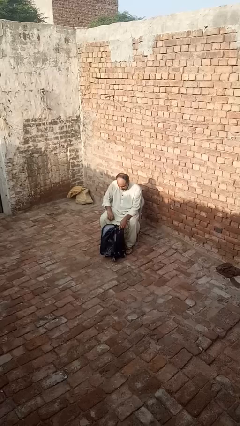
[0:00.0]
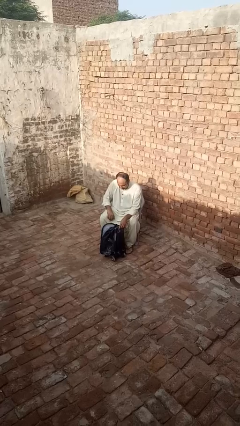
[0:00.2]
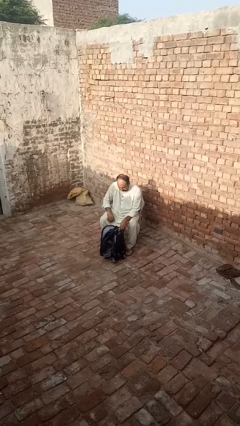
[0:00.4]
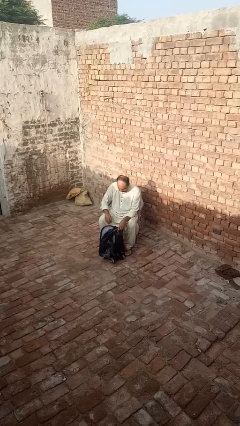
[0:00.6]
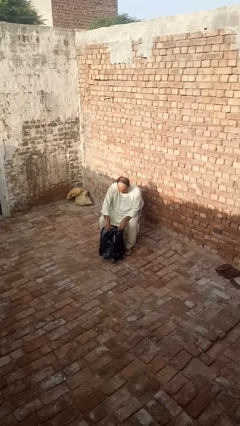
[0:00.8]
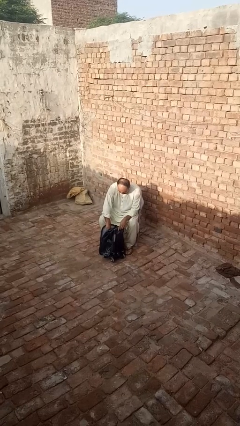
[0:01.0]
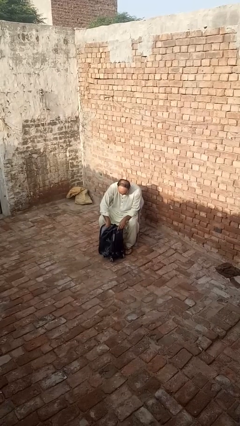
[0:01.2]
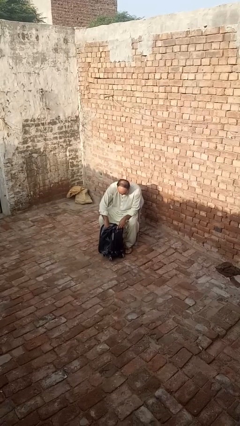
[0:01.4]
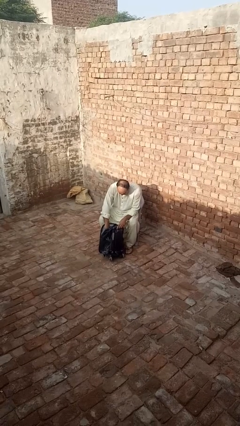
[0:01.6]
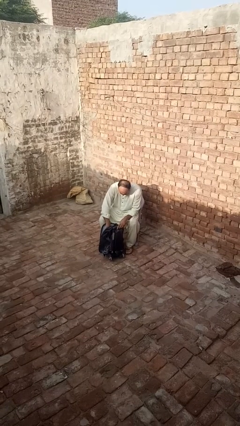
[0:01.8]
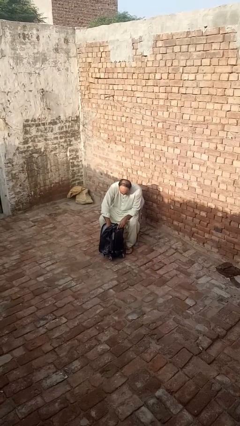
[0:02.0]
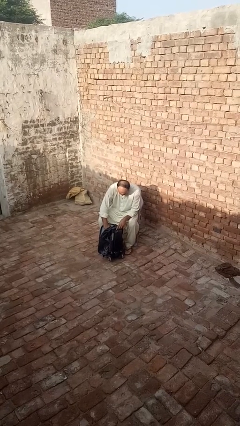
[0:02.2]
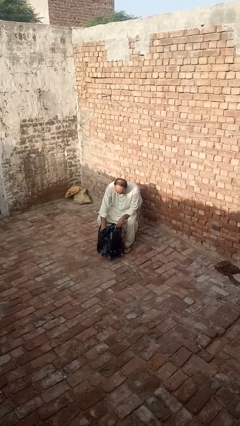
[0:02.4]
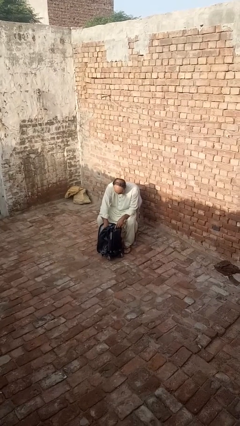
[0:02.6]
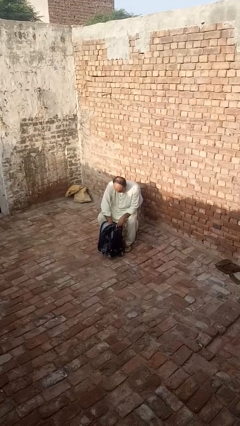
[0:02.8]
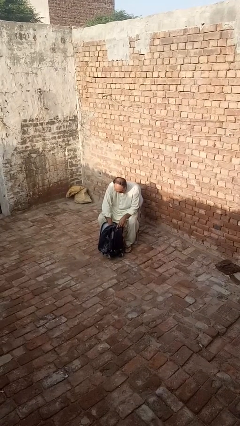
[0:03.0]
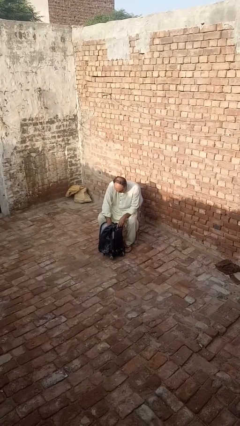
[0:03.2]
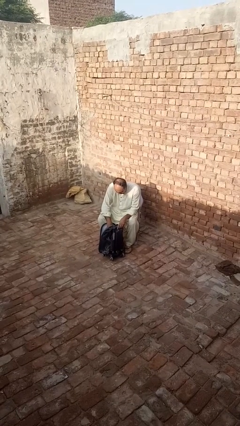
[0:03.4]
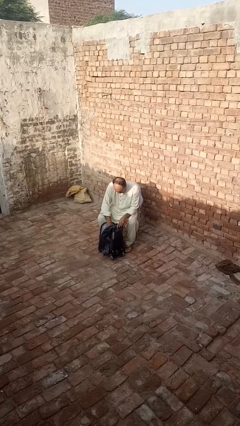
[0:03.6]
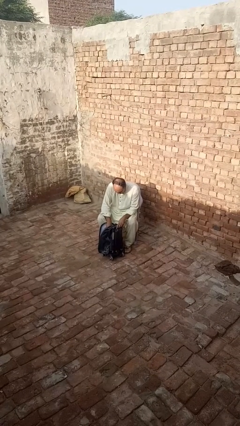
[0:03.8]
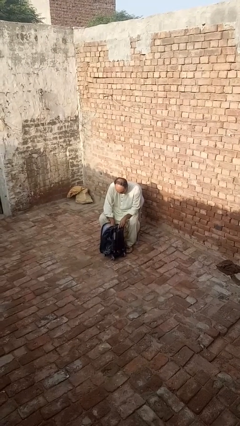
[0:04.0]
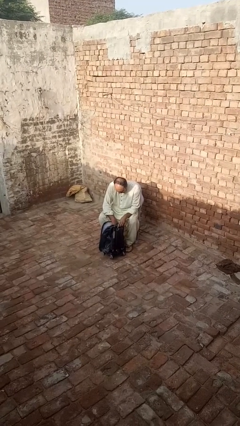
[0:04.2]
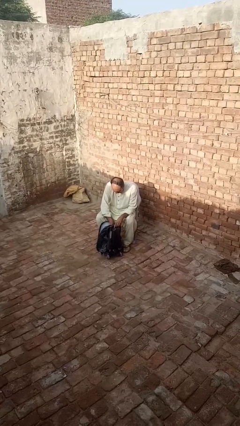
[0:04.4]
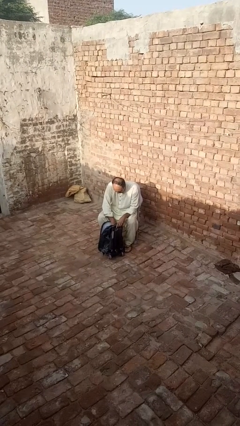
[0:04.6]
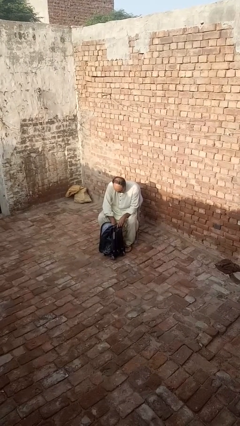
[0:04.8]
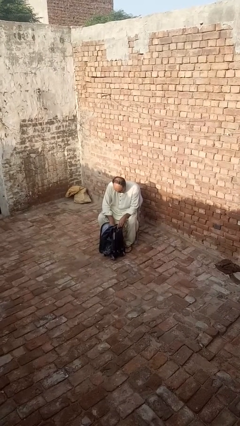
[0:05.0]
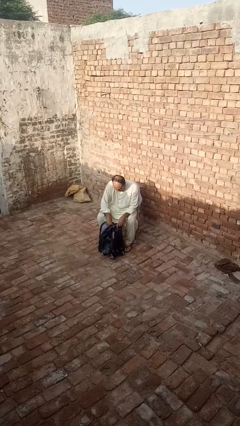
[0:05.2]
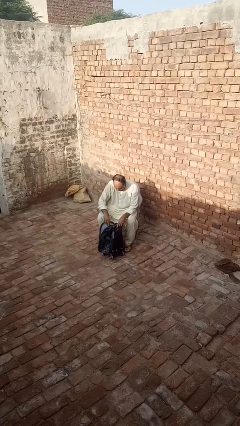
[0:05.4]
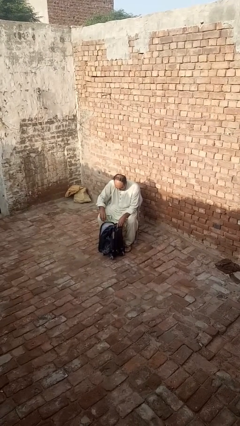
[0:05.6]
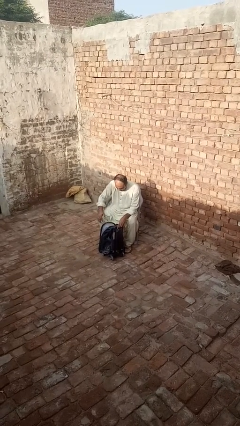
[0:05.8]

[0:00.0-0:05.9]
person searches in backpack

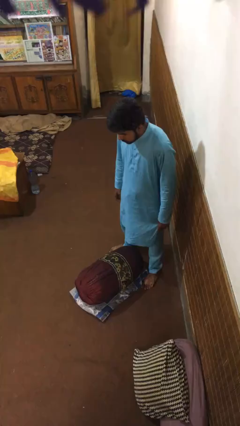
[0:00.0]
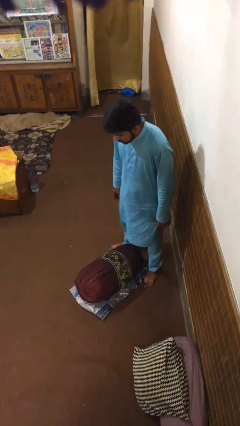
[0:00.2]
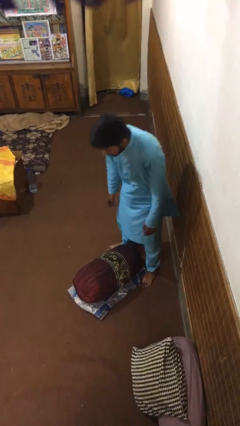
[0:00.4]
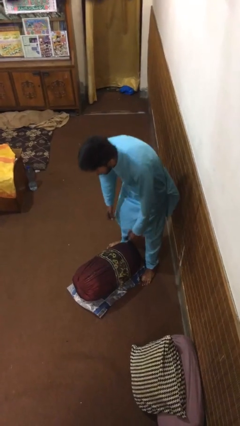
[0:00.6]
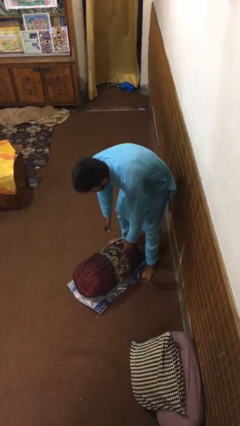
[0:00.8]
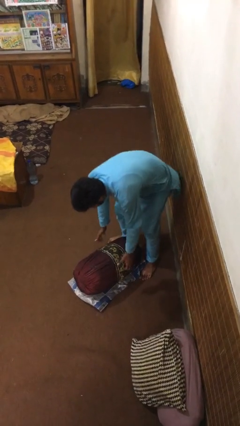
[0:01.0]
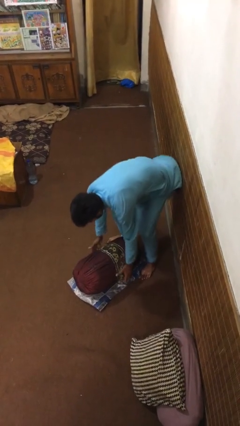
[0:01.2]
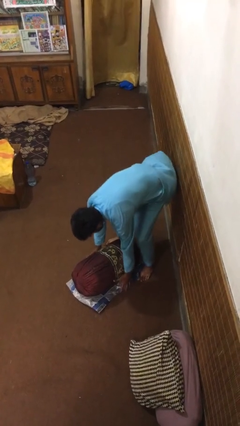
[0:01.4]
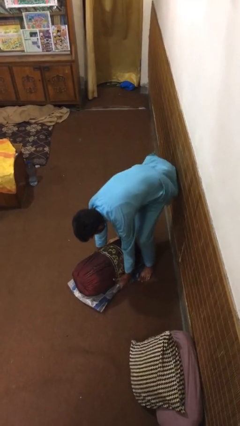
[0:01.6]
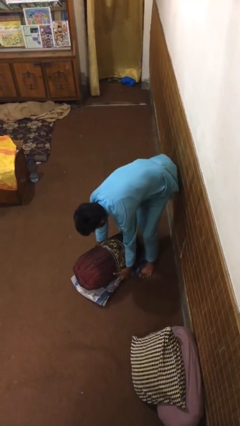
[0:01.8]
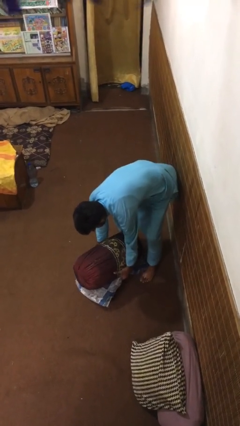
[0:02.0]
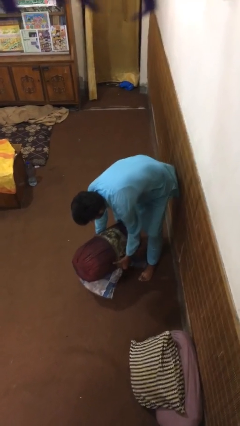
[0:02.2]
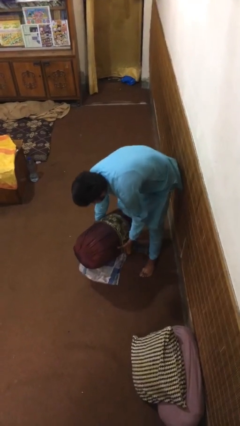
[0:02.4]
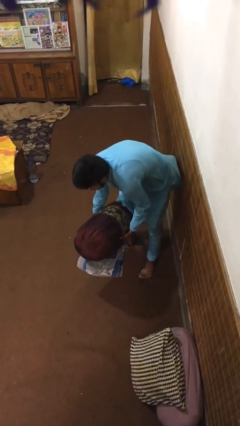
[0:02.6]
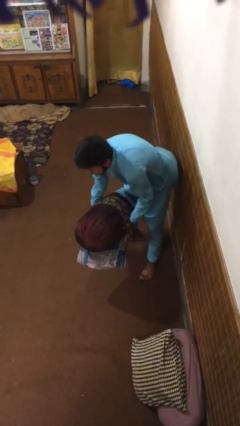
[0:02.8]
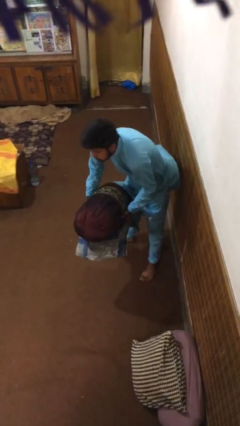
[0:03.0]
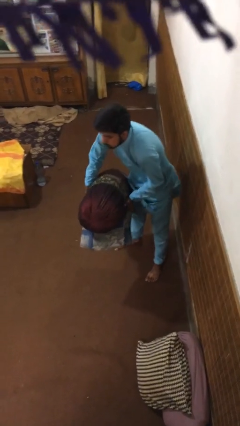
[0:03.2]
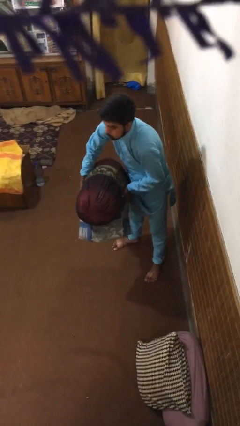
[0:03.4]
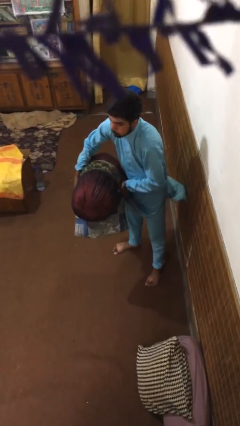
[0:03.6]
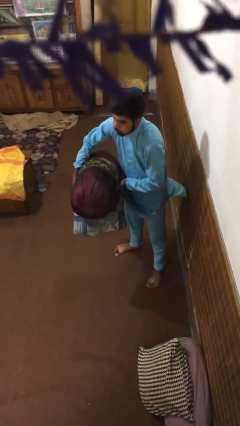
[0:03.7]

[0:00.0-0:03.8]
person picks up object from floor

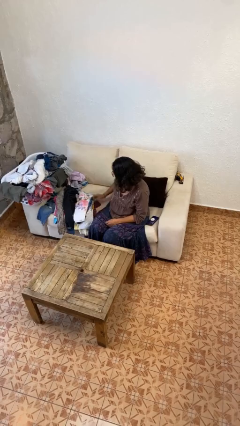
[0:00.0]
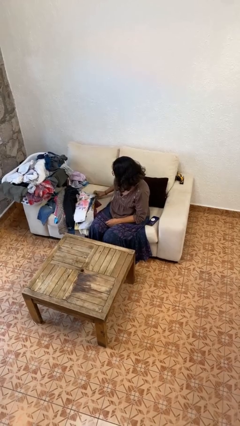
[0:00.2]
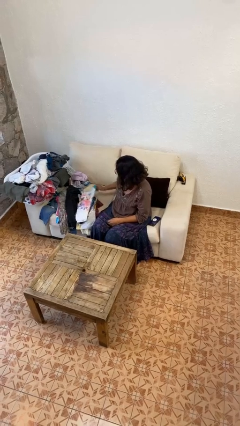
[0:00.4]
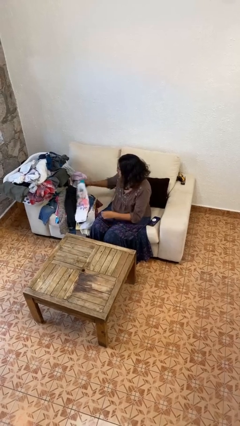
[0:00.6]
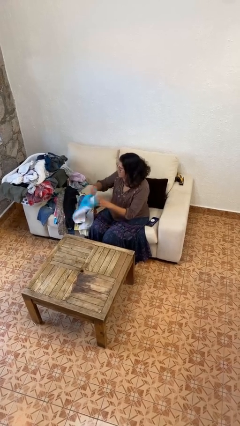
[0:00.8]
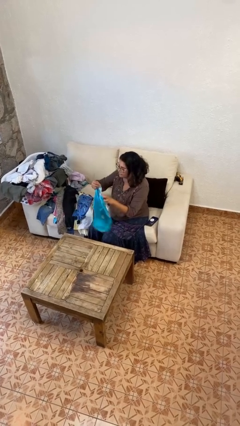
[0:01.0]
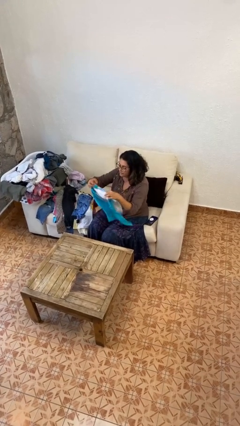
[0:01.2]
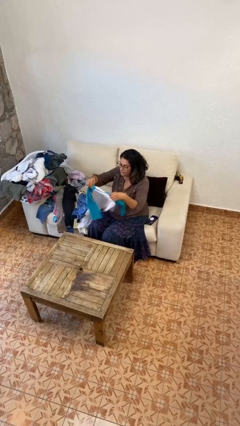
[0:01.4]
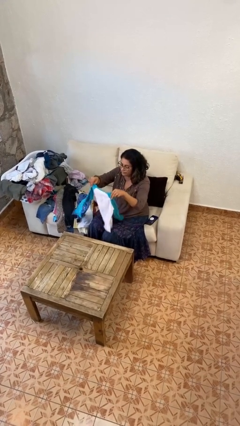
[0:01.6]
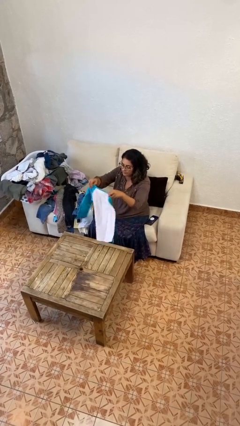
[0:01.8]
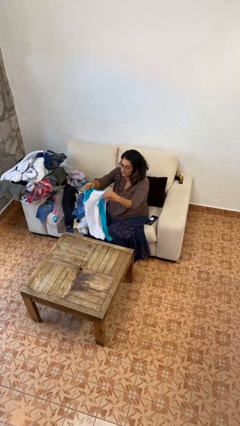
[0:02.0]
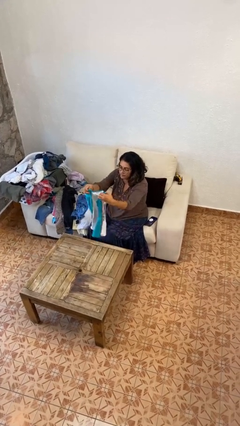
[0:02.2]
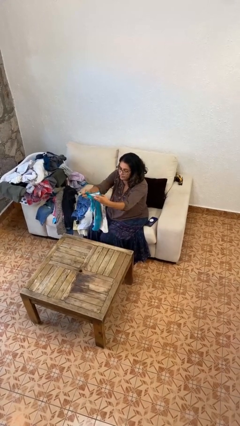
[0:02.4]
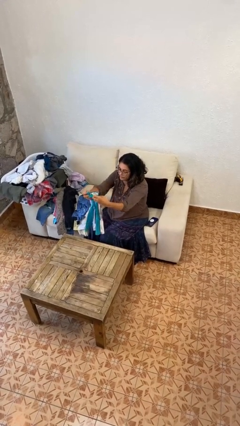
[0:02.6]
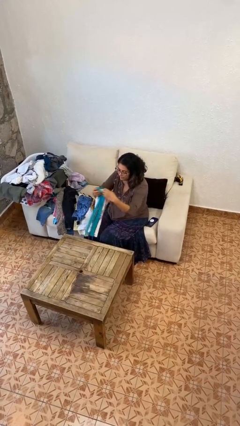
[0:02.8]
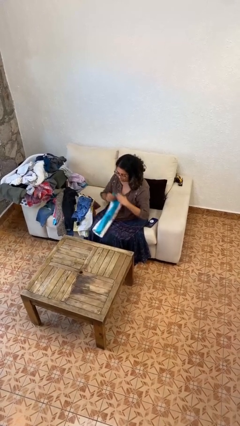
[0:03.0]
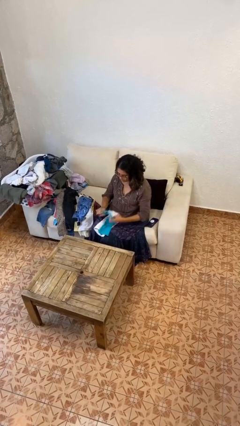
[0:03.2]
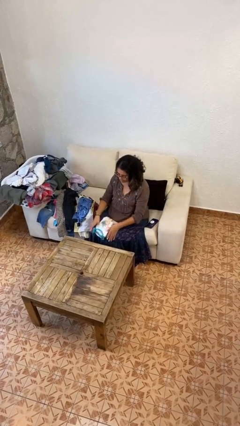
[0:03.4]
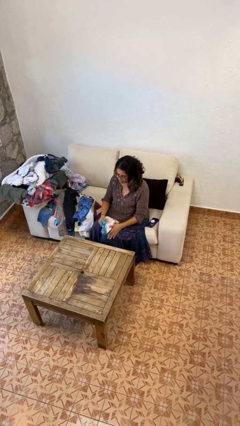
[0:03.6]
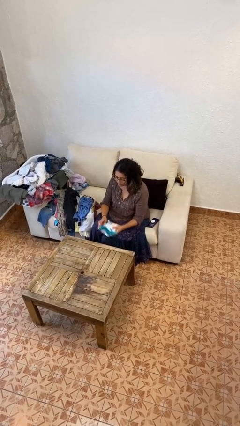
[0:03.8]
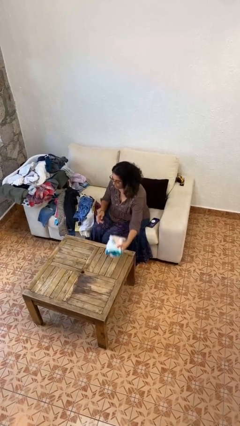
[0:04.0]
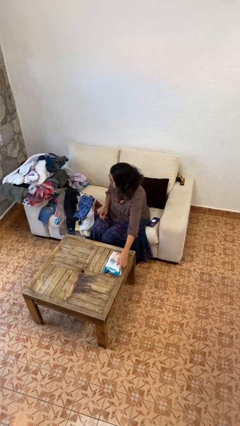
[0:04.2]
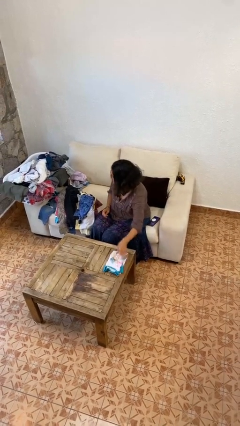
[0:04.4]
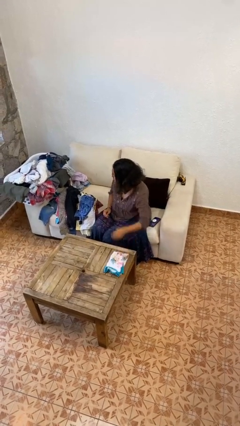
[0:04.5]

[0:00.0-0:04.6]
person folds shirt

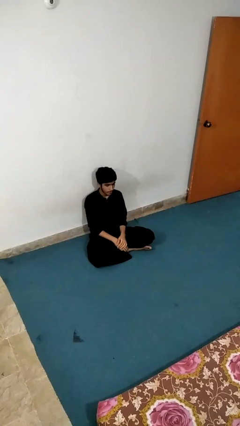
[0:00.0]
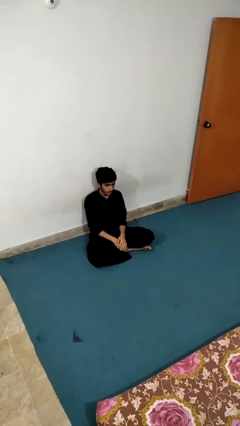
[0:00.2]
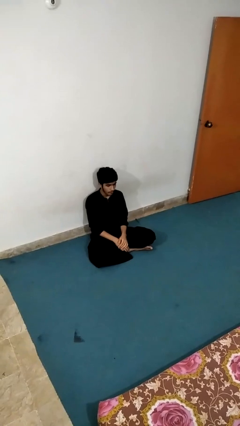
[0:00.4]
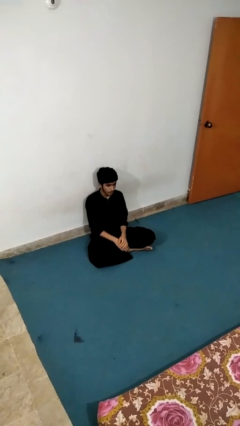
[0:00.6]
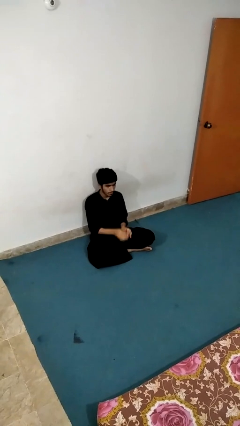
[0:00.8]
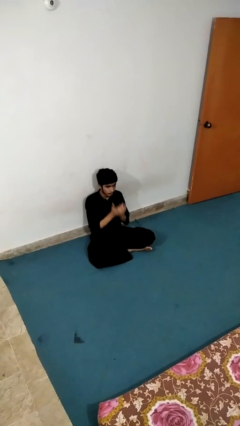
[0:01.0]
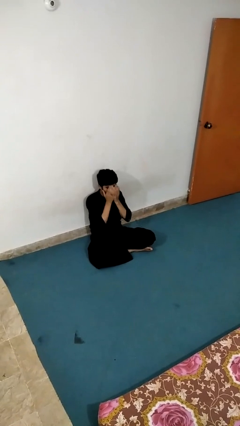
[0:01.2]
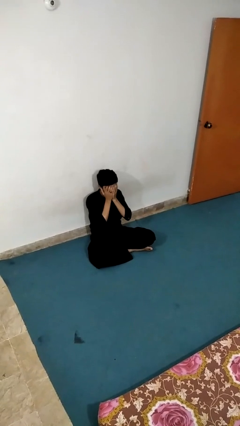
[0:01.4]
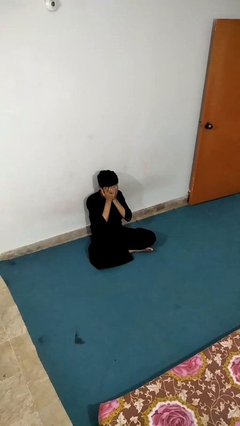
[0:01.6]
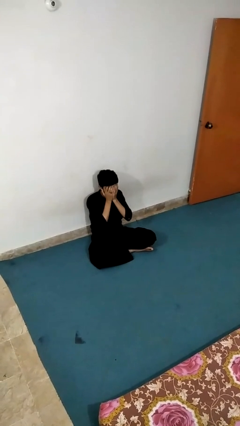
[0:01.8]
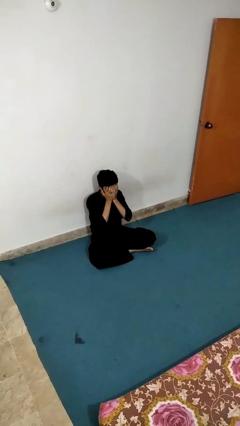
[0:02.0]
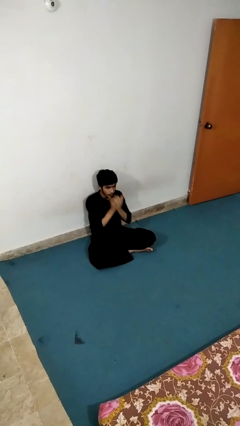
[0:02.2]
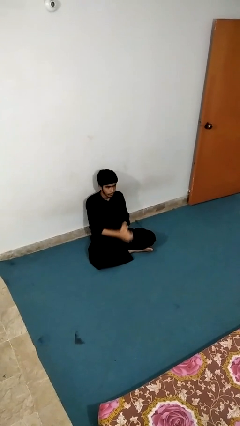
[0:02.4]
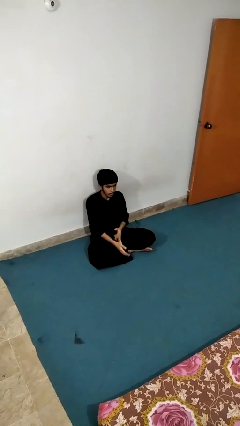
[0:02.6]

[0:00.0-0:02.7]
person covers face with hands

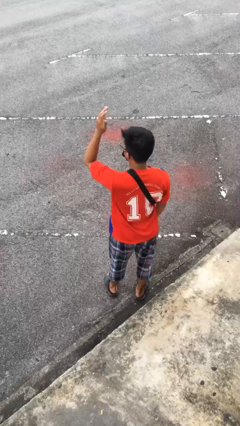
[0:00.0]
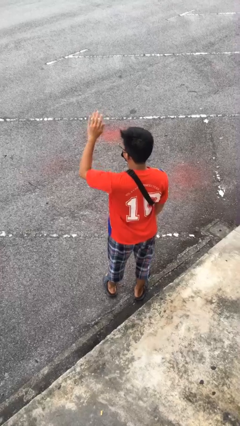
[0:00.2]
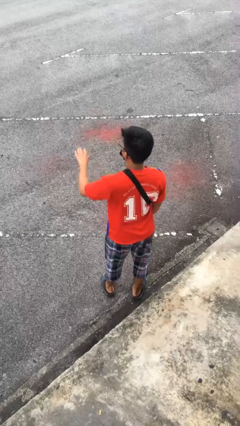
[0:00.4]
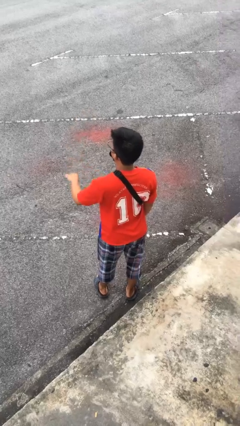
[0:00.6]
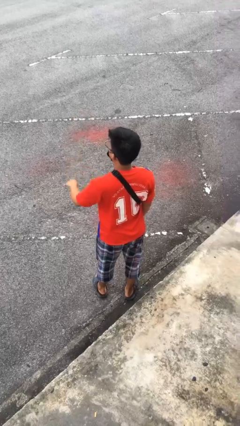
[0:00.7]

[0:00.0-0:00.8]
person gestures swipe down
